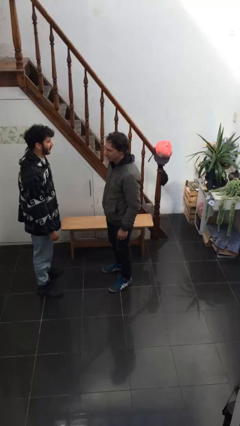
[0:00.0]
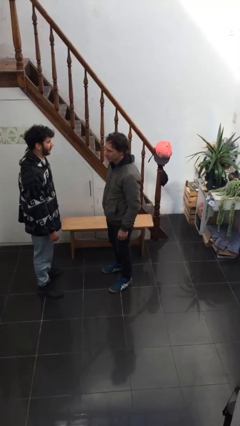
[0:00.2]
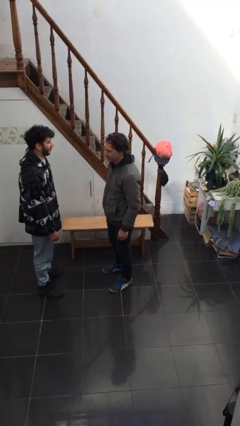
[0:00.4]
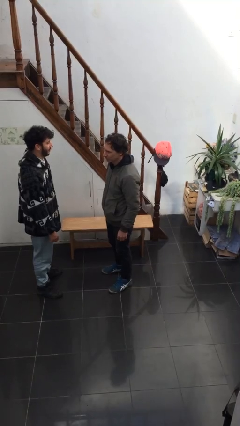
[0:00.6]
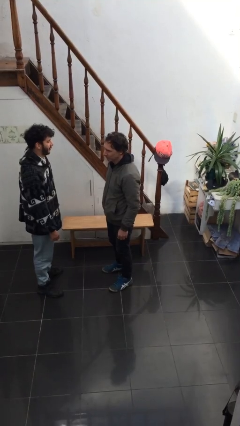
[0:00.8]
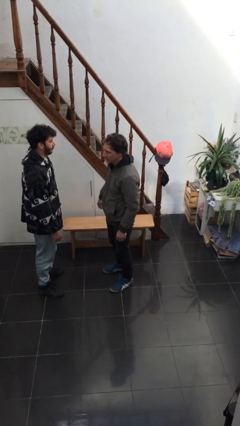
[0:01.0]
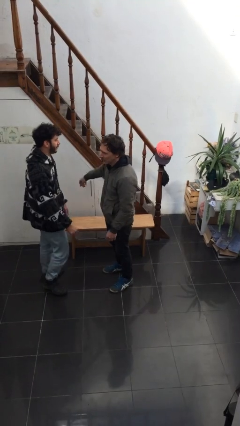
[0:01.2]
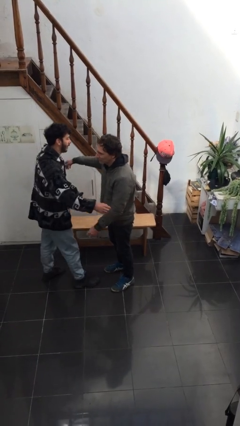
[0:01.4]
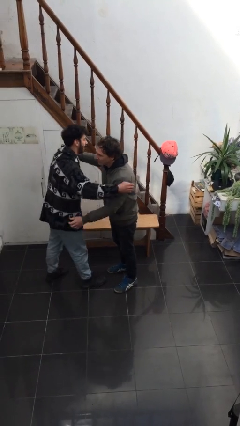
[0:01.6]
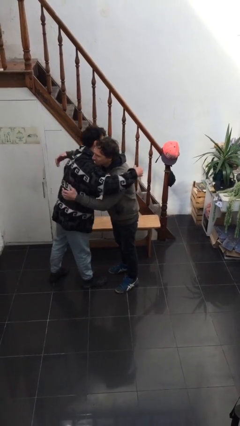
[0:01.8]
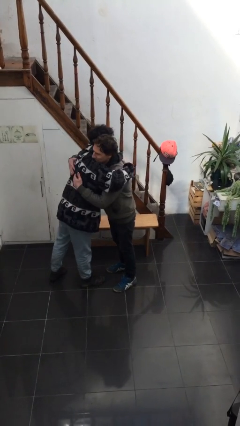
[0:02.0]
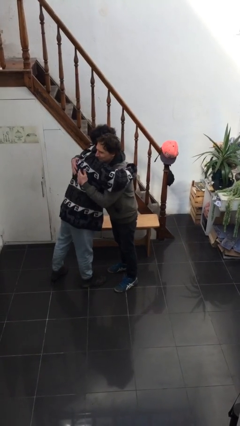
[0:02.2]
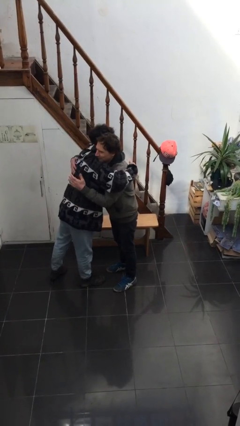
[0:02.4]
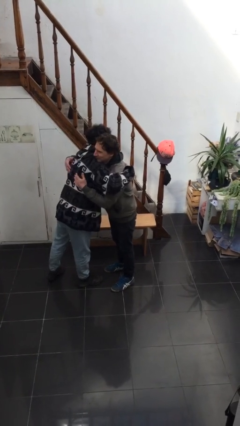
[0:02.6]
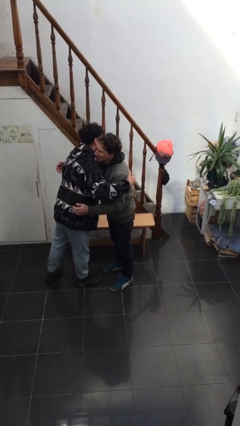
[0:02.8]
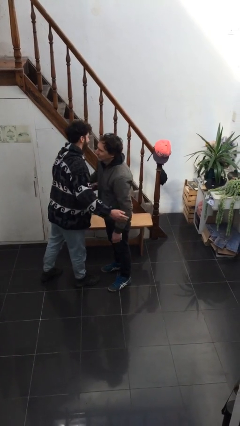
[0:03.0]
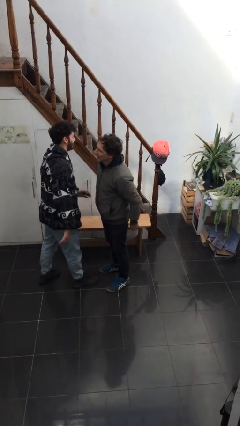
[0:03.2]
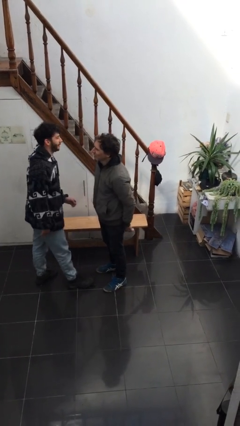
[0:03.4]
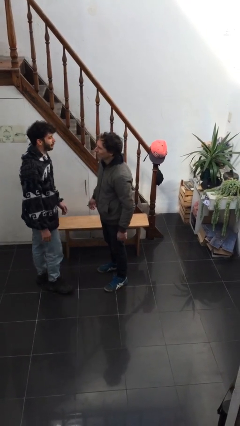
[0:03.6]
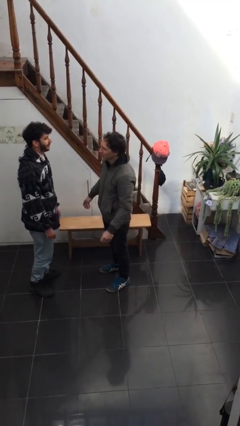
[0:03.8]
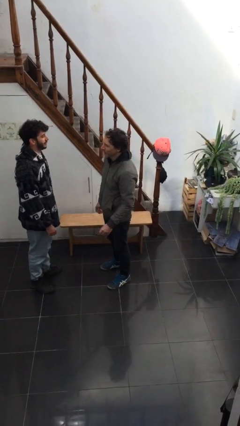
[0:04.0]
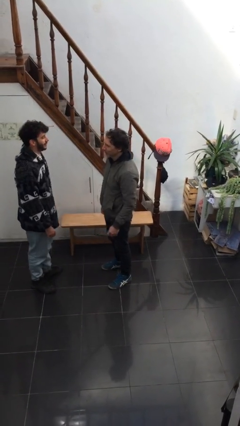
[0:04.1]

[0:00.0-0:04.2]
person embraces person

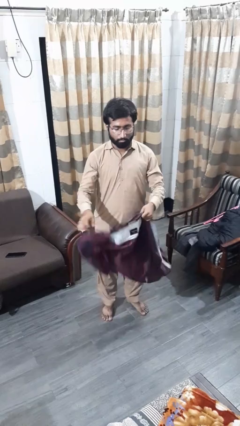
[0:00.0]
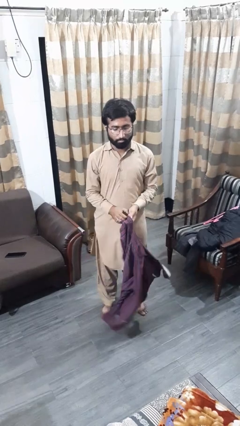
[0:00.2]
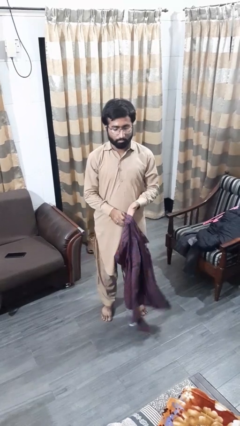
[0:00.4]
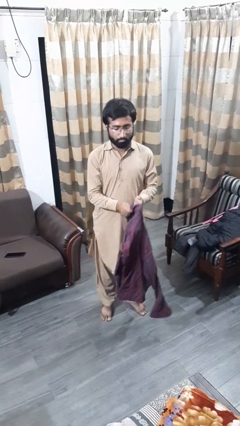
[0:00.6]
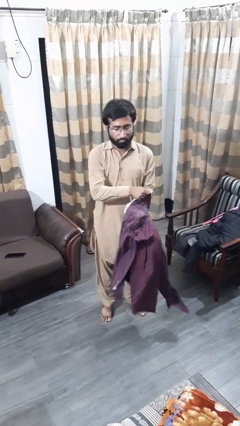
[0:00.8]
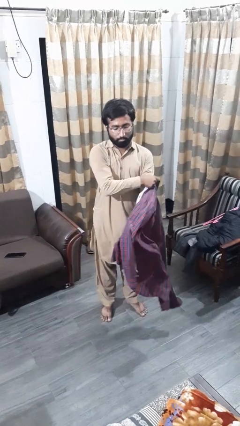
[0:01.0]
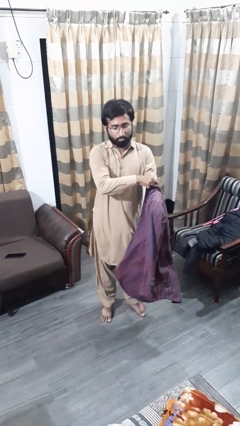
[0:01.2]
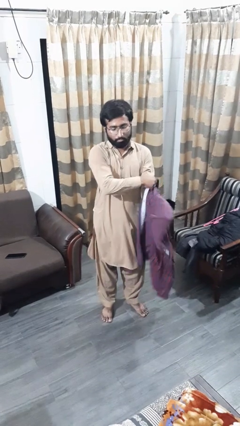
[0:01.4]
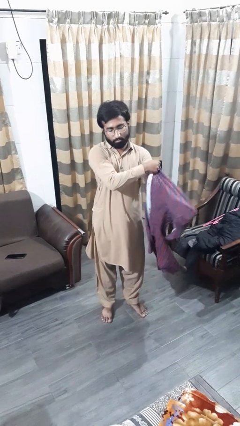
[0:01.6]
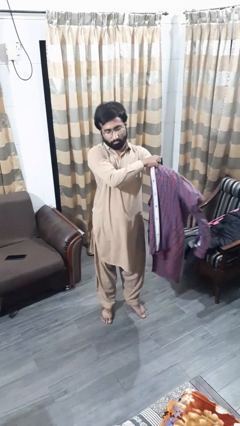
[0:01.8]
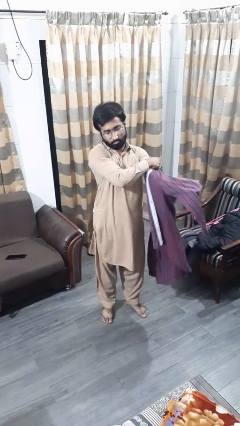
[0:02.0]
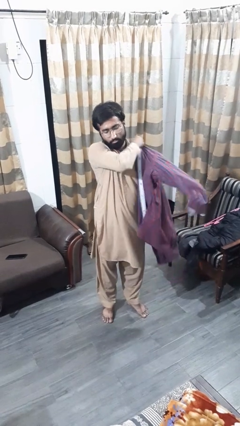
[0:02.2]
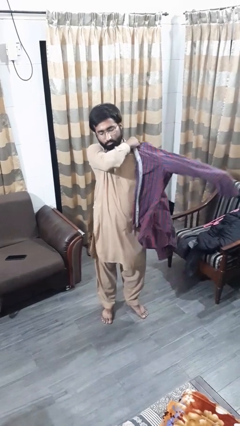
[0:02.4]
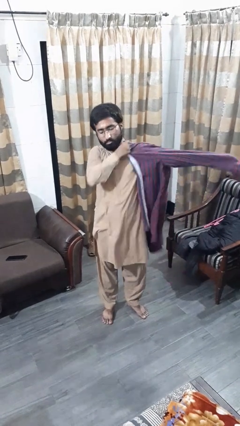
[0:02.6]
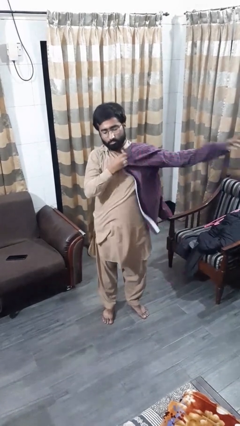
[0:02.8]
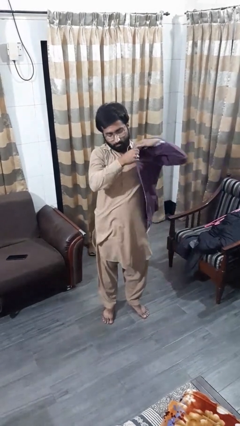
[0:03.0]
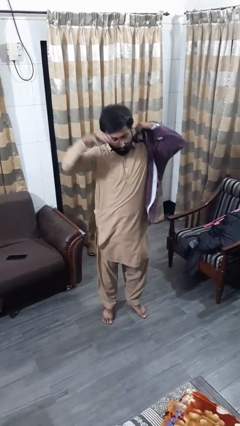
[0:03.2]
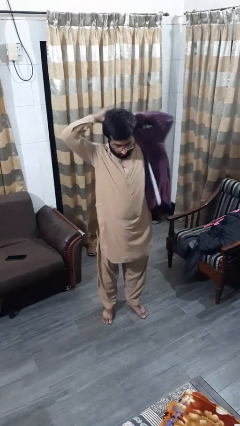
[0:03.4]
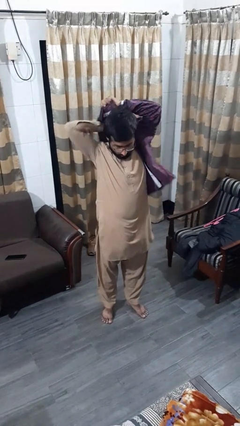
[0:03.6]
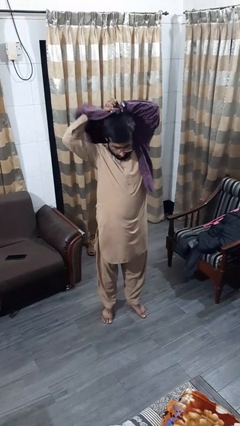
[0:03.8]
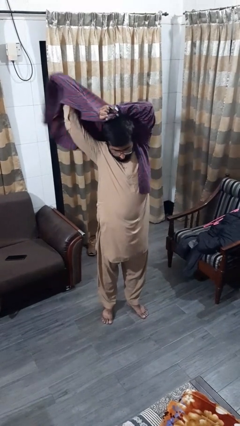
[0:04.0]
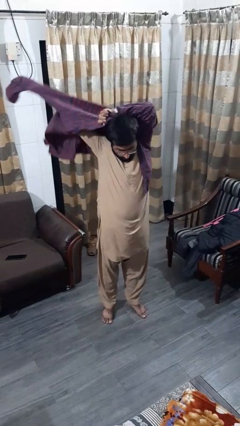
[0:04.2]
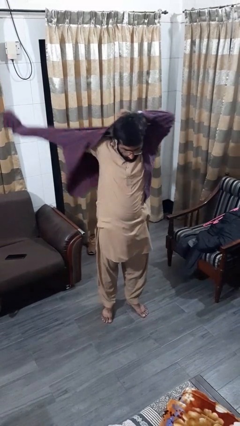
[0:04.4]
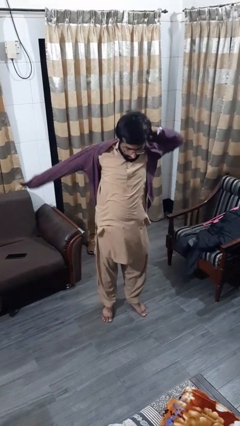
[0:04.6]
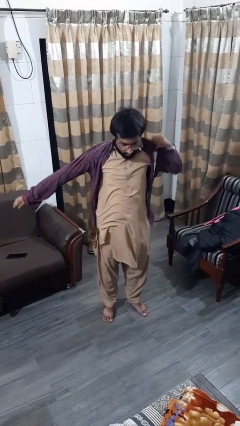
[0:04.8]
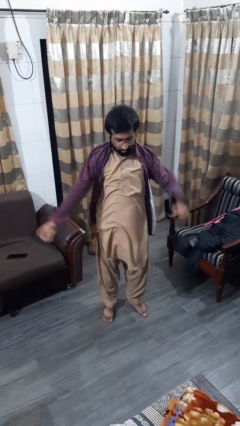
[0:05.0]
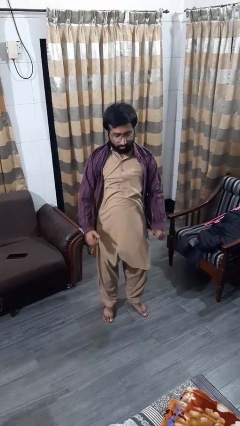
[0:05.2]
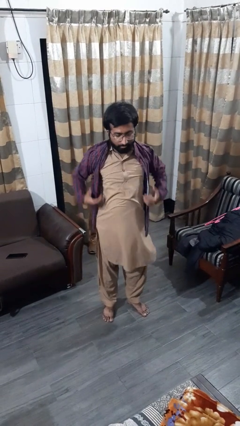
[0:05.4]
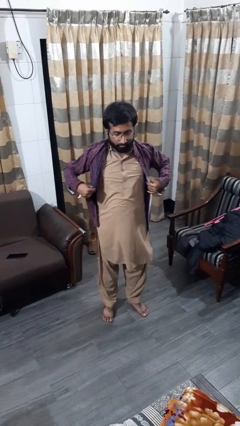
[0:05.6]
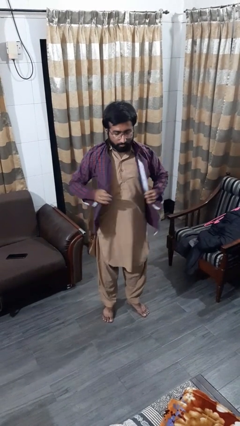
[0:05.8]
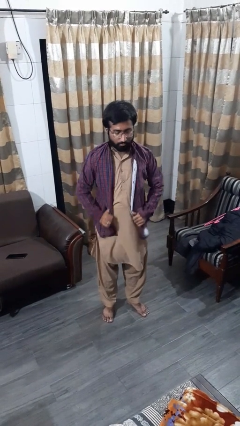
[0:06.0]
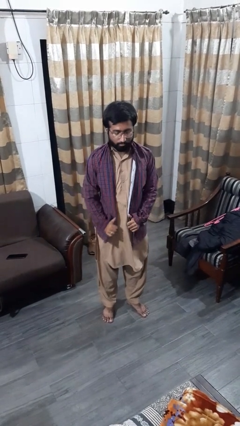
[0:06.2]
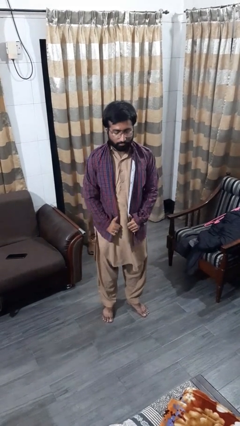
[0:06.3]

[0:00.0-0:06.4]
person puts on shirt

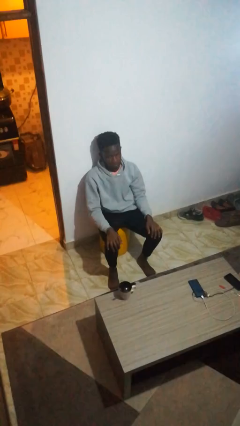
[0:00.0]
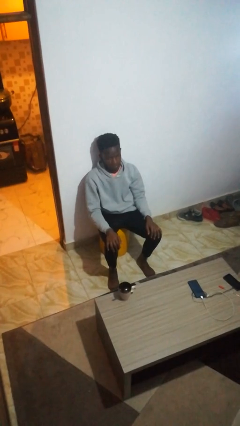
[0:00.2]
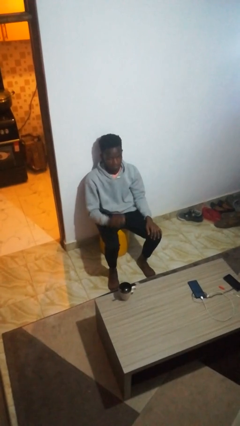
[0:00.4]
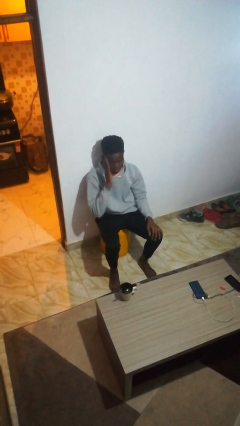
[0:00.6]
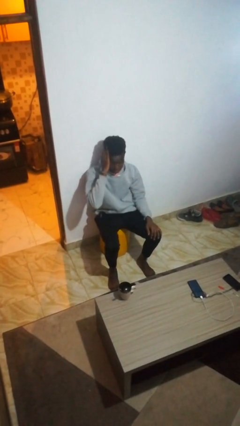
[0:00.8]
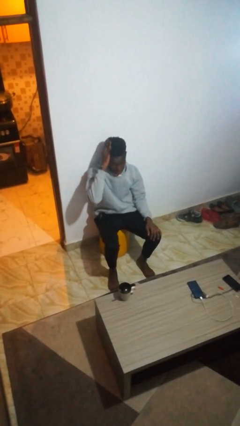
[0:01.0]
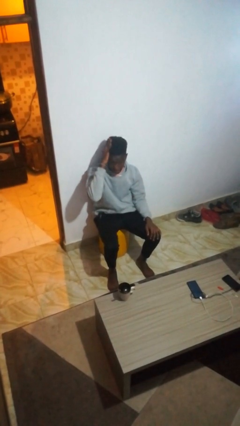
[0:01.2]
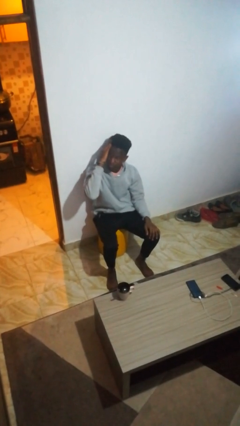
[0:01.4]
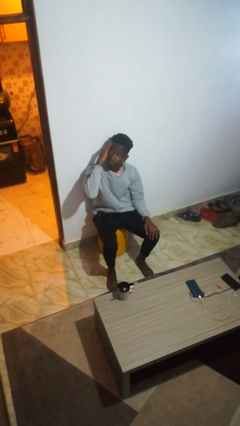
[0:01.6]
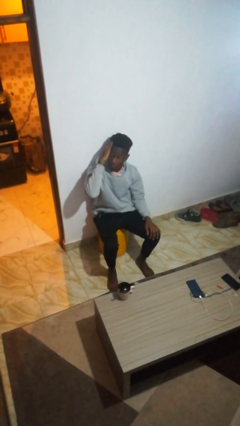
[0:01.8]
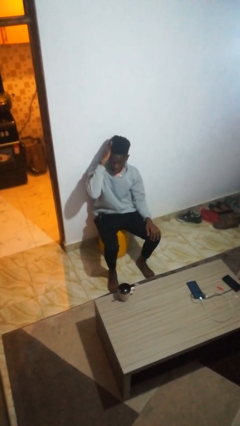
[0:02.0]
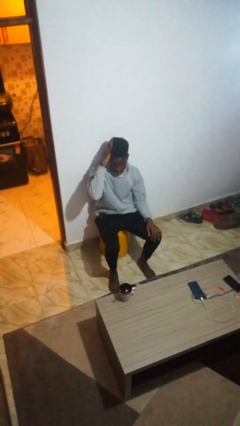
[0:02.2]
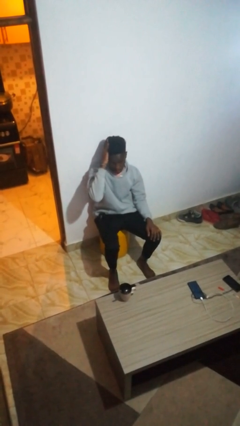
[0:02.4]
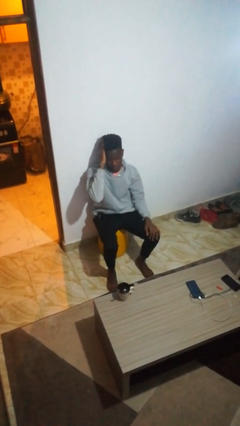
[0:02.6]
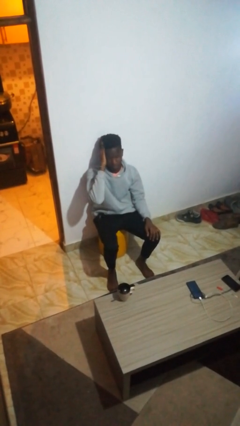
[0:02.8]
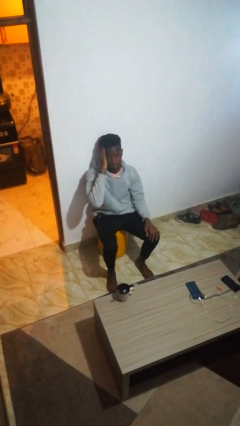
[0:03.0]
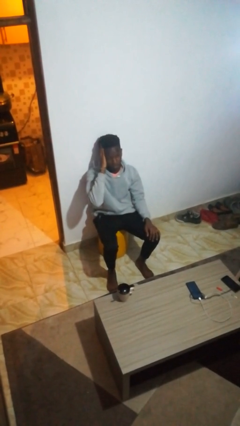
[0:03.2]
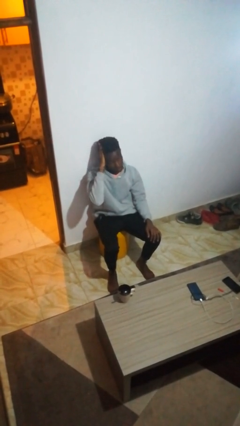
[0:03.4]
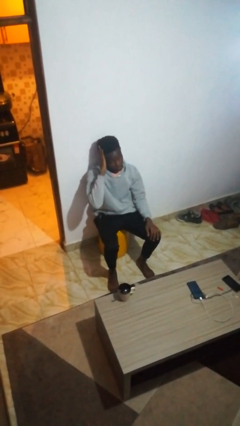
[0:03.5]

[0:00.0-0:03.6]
person strokes hair

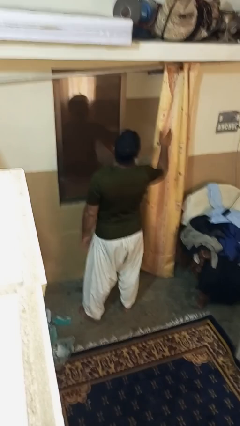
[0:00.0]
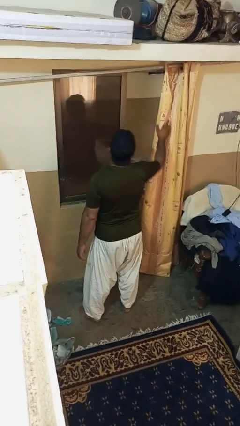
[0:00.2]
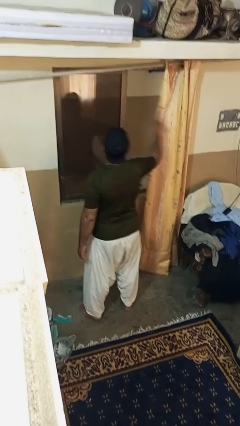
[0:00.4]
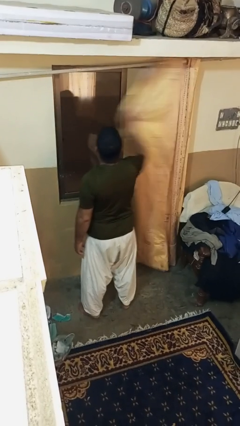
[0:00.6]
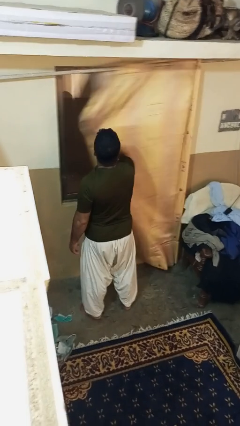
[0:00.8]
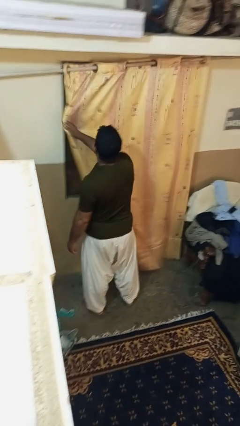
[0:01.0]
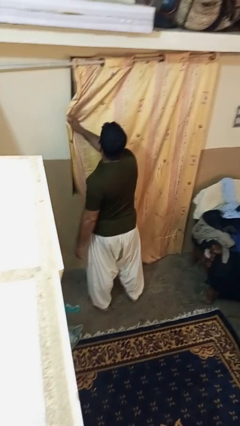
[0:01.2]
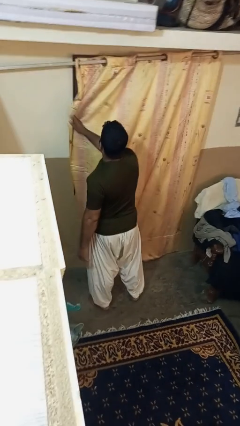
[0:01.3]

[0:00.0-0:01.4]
person closes curtains

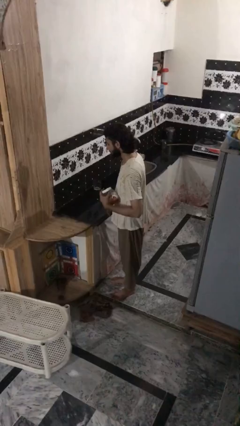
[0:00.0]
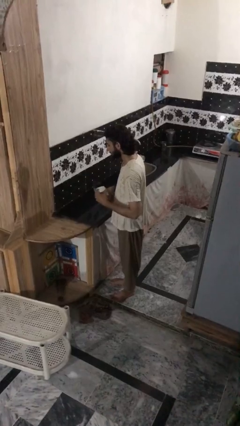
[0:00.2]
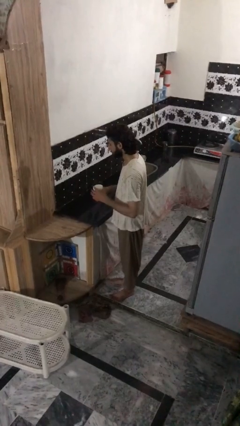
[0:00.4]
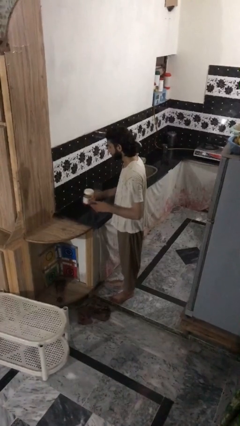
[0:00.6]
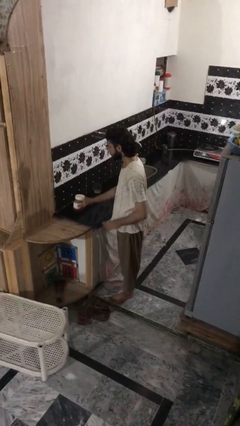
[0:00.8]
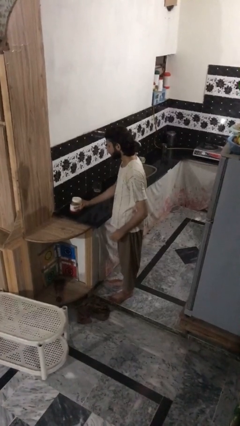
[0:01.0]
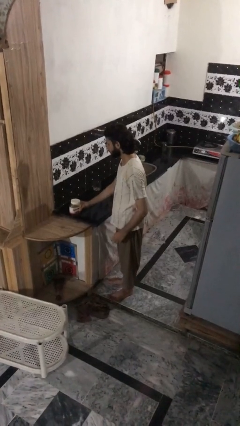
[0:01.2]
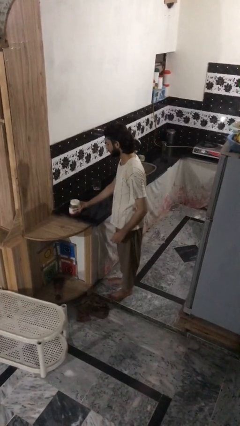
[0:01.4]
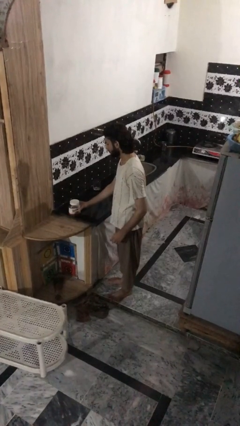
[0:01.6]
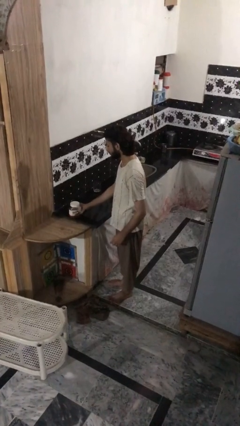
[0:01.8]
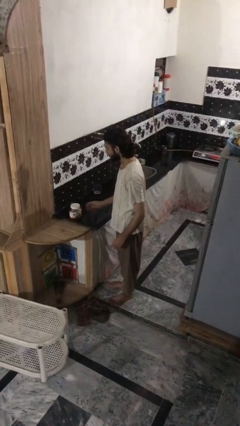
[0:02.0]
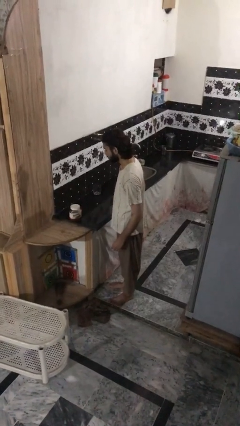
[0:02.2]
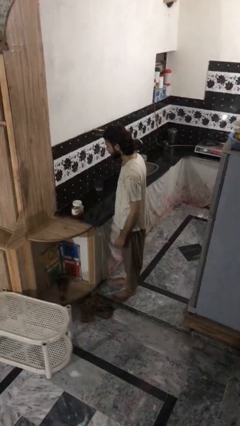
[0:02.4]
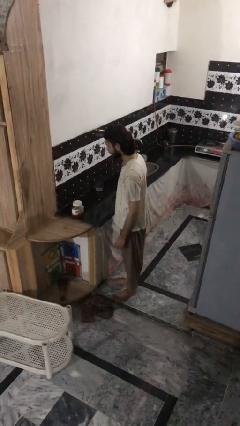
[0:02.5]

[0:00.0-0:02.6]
person puts down object on countertop
